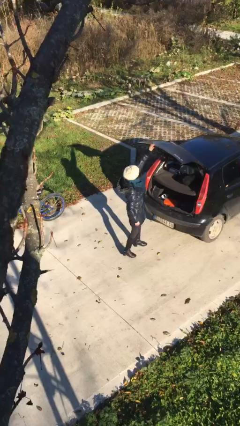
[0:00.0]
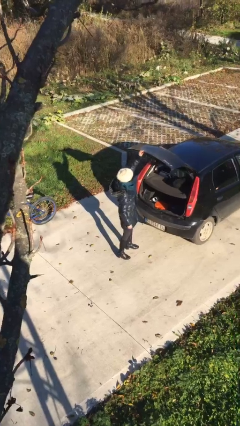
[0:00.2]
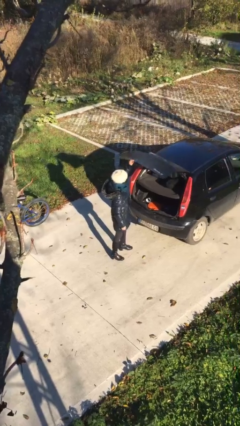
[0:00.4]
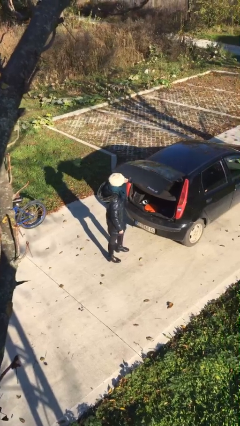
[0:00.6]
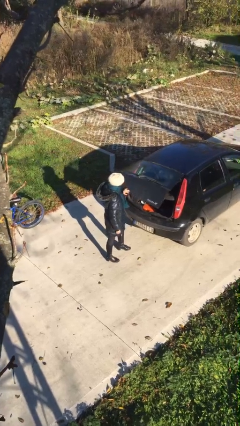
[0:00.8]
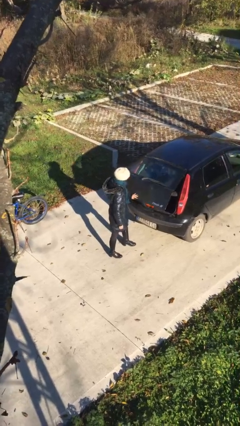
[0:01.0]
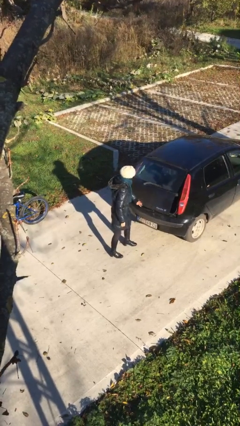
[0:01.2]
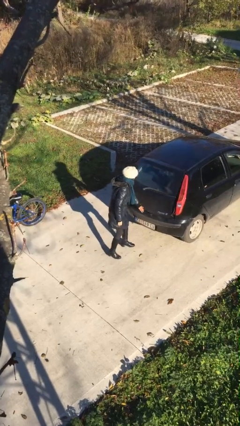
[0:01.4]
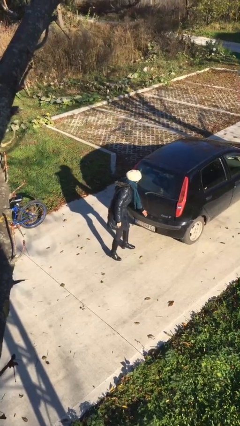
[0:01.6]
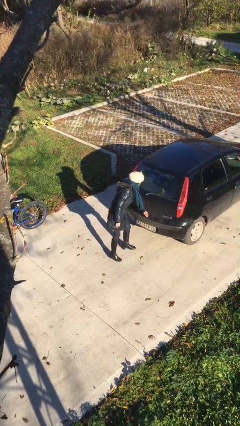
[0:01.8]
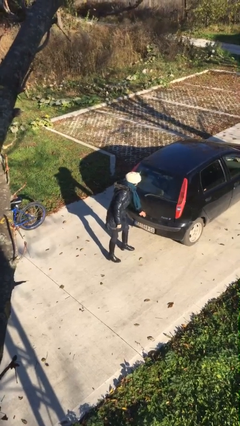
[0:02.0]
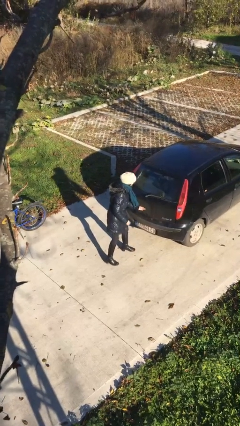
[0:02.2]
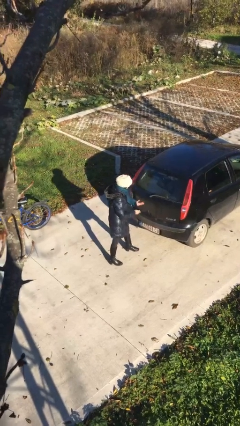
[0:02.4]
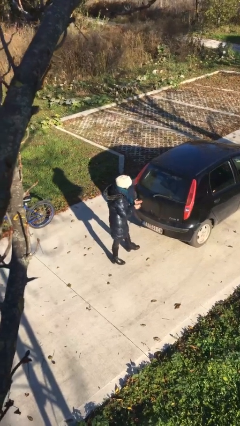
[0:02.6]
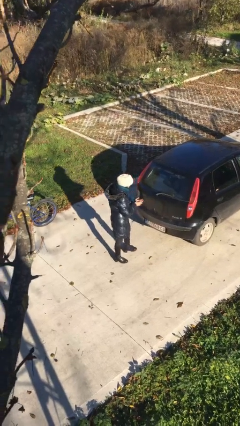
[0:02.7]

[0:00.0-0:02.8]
person closes car trunk

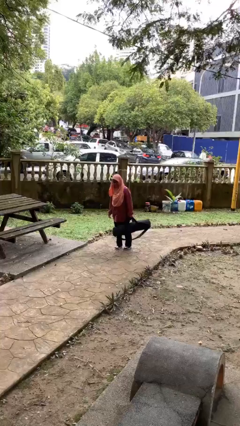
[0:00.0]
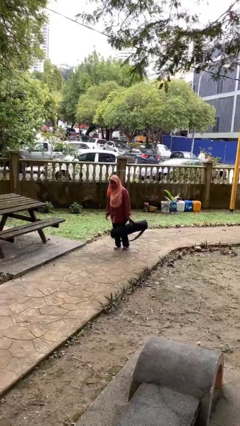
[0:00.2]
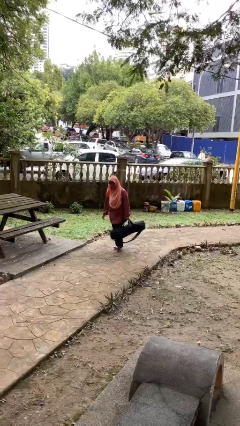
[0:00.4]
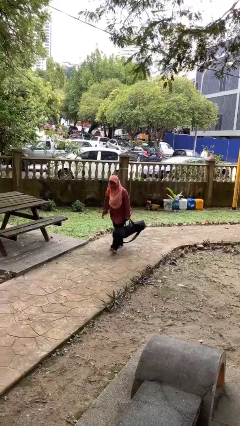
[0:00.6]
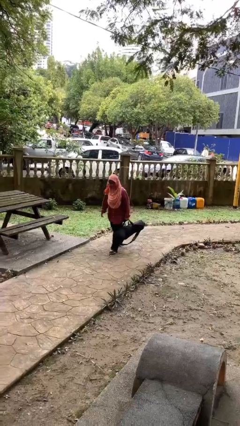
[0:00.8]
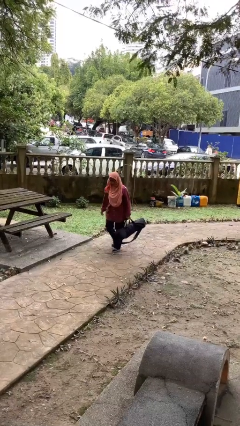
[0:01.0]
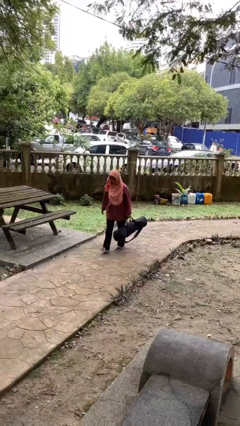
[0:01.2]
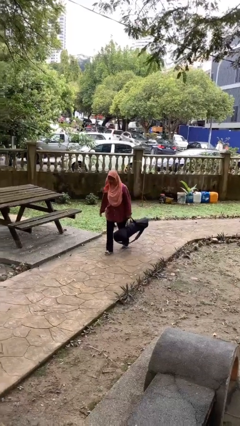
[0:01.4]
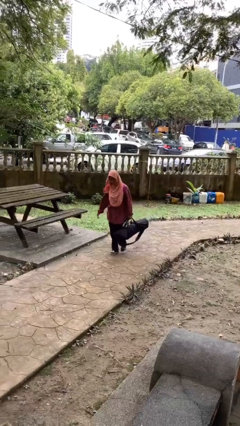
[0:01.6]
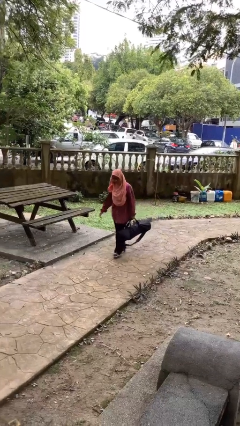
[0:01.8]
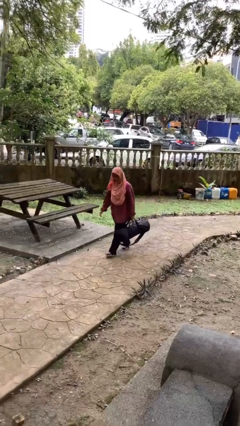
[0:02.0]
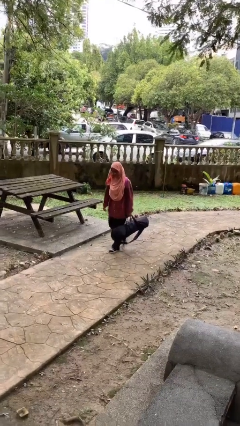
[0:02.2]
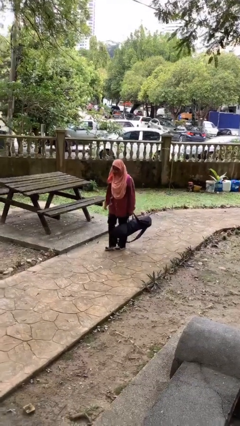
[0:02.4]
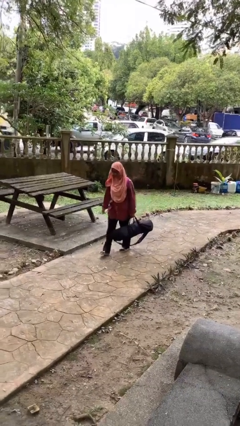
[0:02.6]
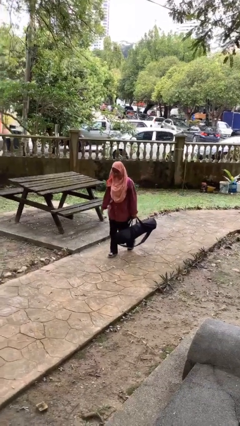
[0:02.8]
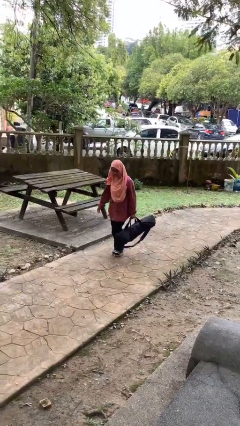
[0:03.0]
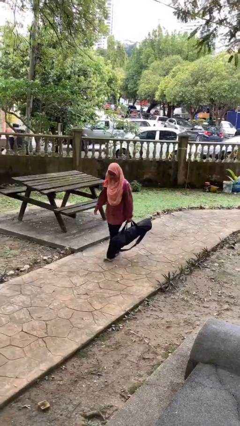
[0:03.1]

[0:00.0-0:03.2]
person carries heavy object

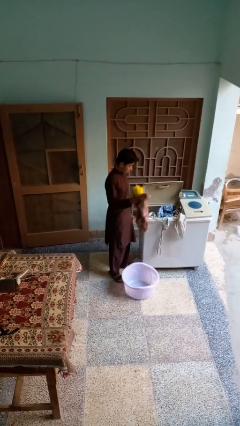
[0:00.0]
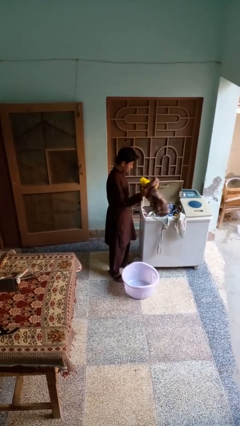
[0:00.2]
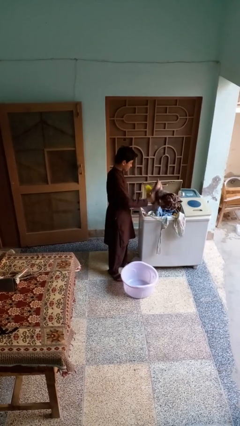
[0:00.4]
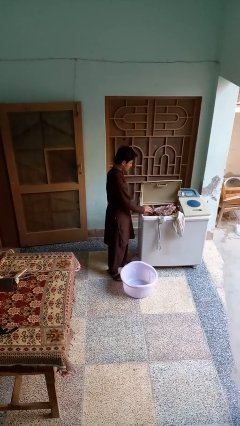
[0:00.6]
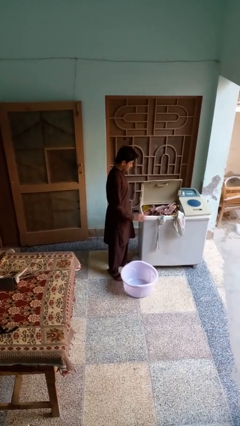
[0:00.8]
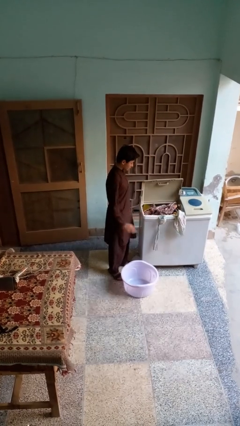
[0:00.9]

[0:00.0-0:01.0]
person unloads clotheswasher

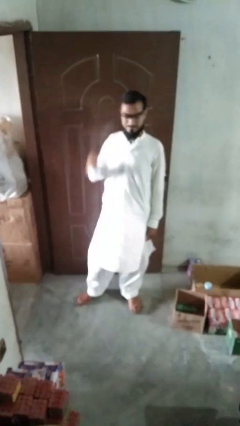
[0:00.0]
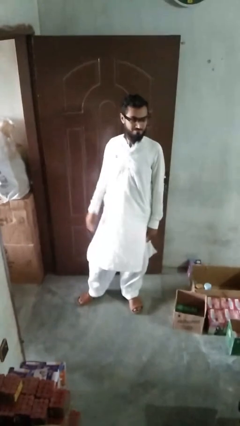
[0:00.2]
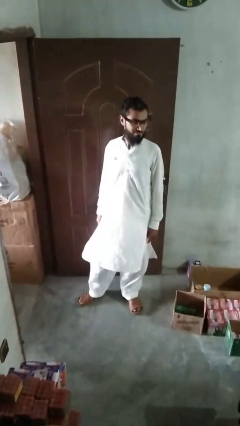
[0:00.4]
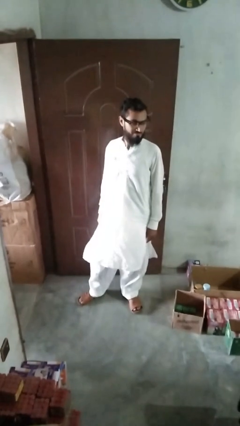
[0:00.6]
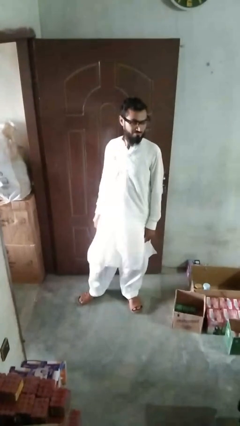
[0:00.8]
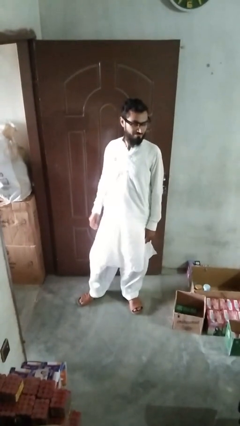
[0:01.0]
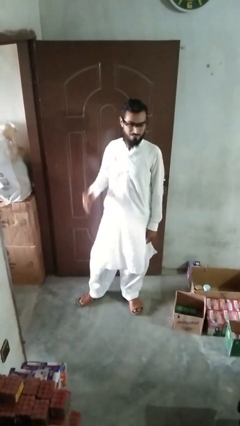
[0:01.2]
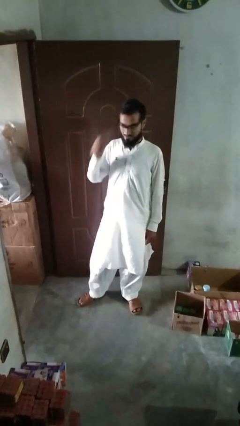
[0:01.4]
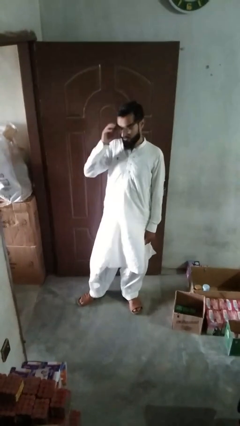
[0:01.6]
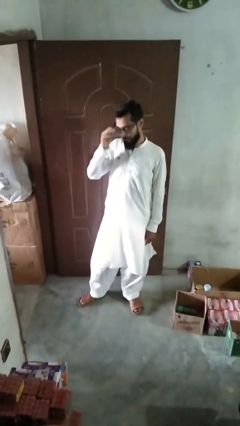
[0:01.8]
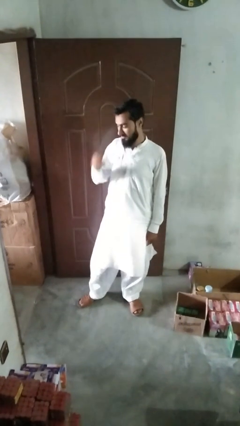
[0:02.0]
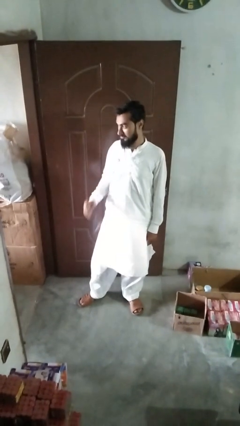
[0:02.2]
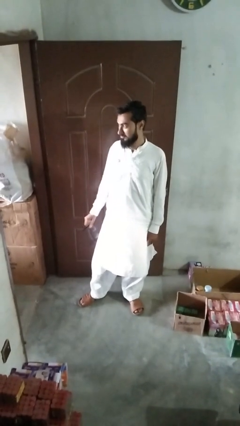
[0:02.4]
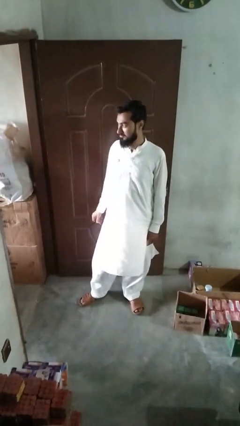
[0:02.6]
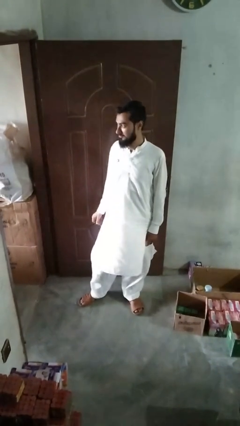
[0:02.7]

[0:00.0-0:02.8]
person takes off glasses

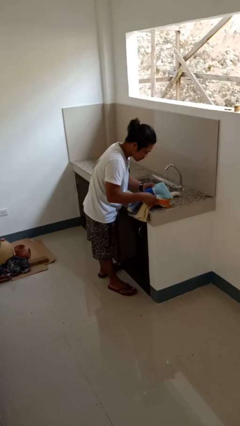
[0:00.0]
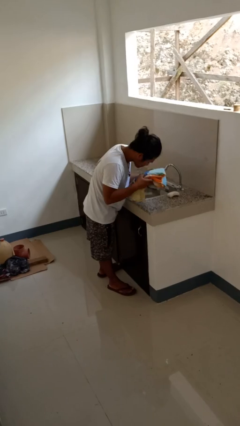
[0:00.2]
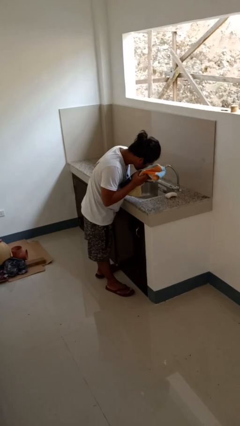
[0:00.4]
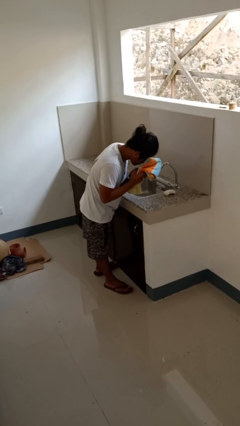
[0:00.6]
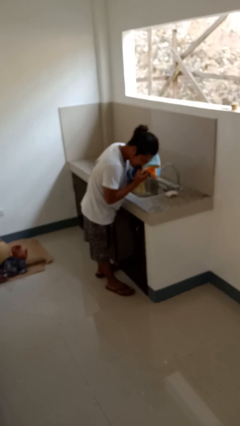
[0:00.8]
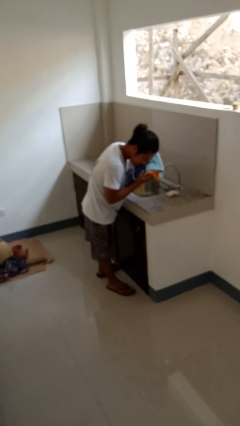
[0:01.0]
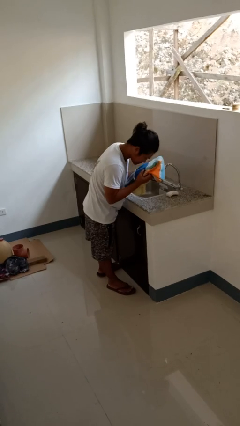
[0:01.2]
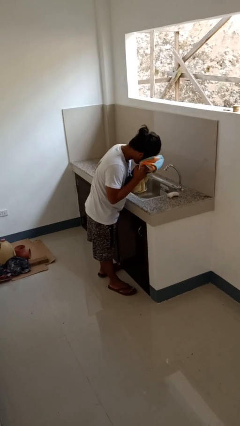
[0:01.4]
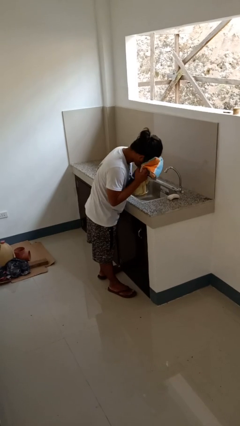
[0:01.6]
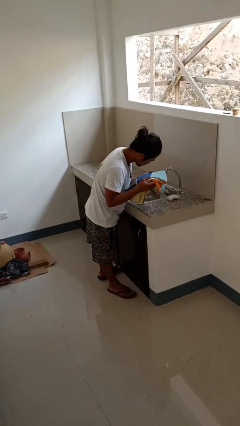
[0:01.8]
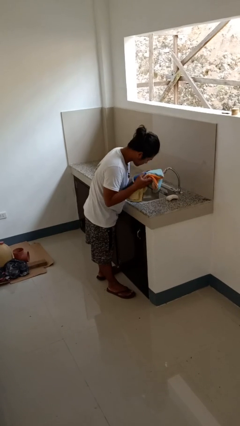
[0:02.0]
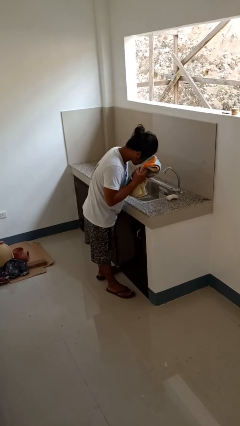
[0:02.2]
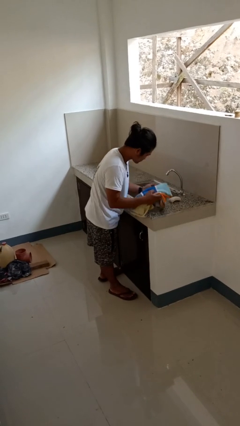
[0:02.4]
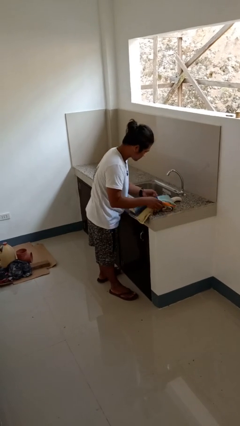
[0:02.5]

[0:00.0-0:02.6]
person dries face with towel

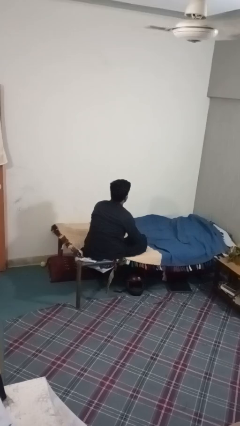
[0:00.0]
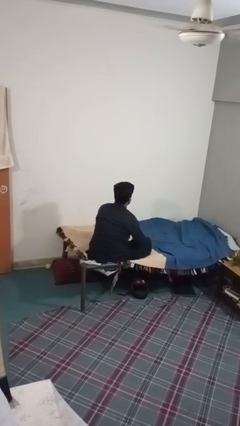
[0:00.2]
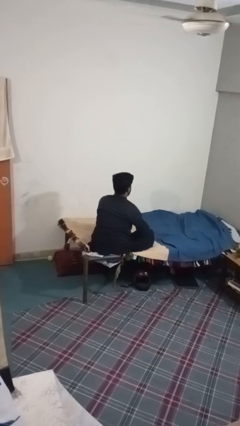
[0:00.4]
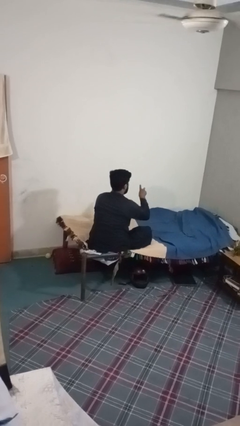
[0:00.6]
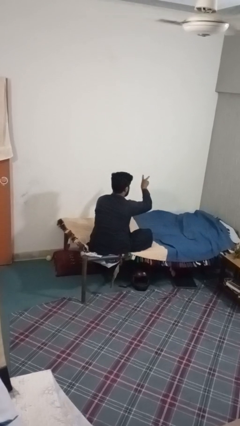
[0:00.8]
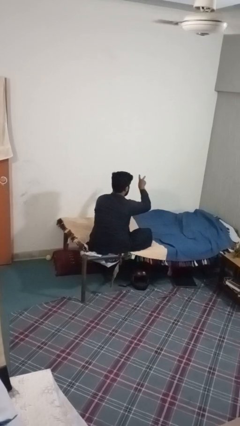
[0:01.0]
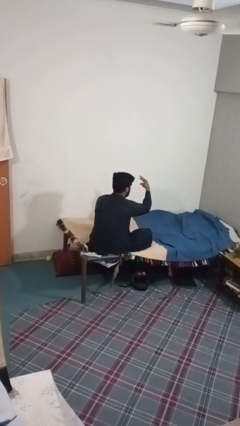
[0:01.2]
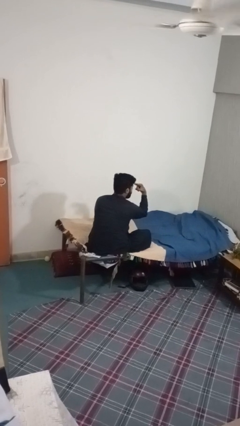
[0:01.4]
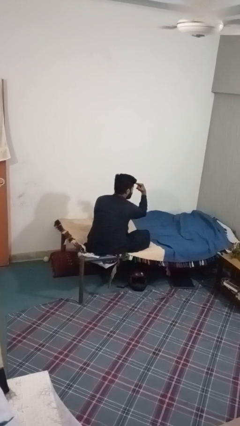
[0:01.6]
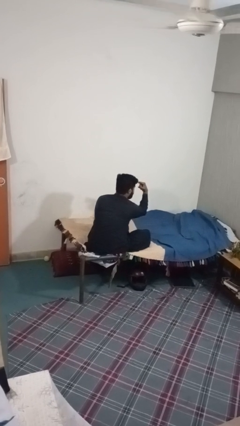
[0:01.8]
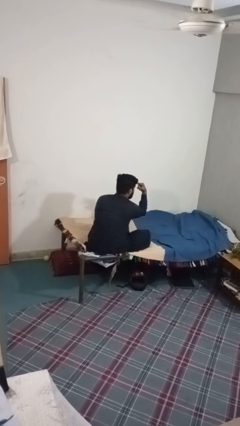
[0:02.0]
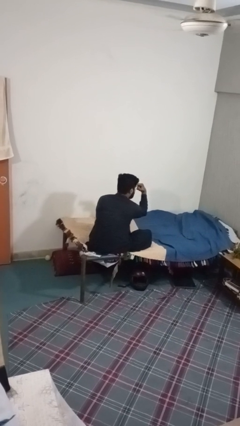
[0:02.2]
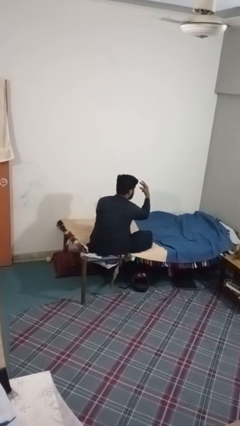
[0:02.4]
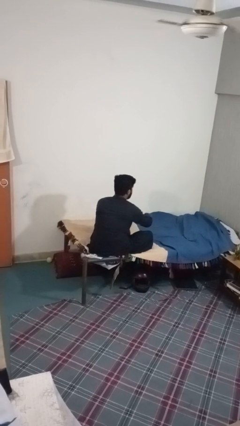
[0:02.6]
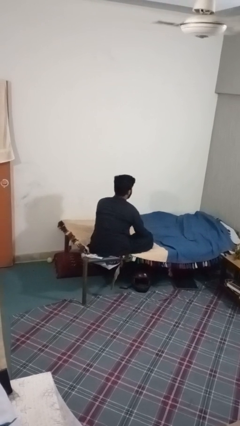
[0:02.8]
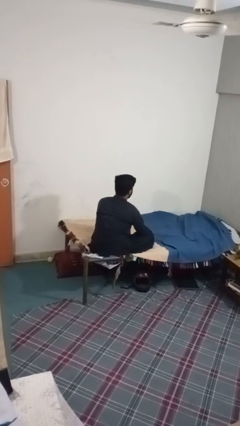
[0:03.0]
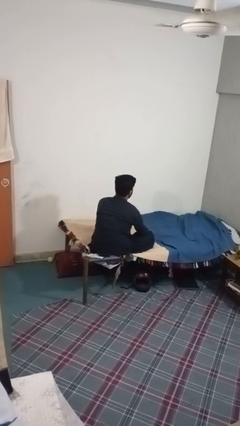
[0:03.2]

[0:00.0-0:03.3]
person gestures watch closely

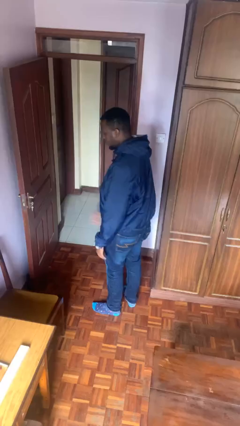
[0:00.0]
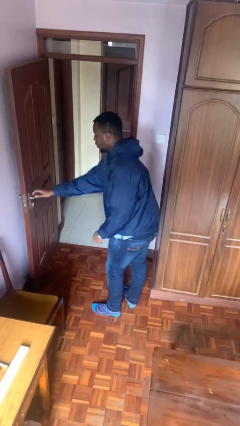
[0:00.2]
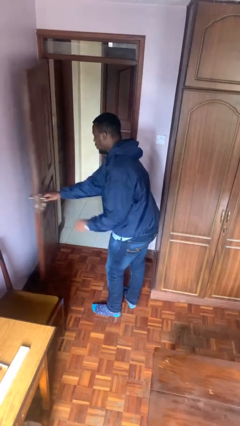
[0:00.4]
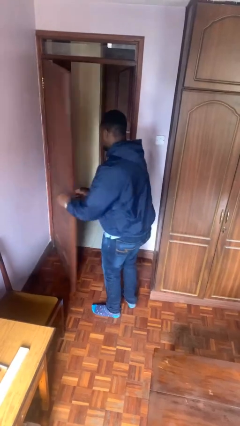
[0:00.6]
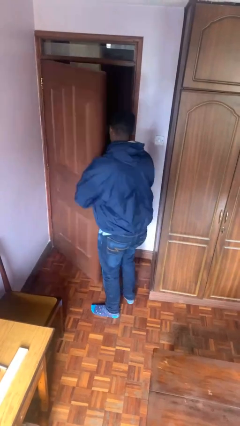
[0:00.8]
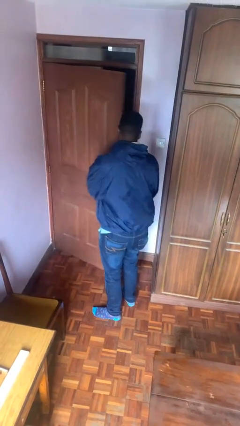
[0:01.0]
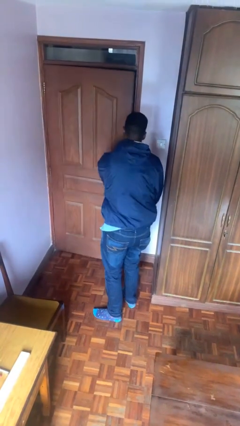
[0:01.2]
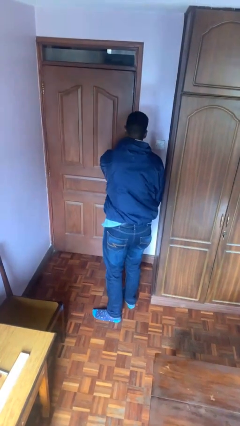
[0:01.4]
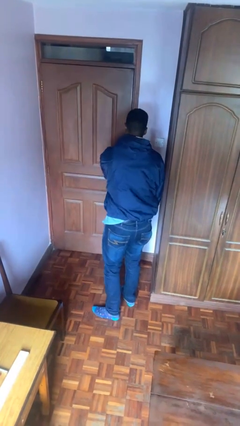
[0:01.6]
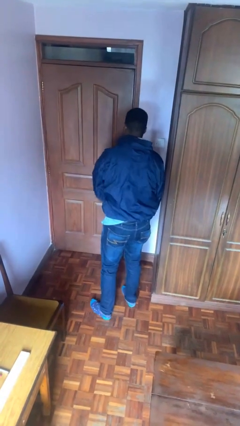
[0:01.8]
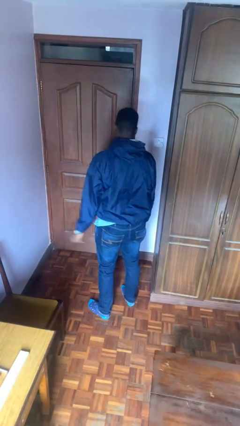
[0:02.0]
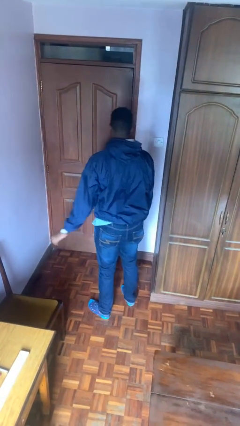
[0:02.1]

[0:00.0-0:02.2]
person closes facility door
